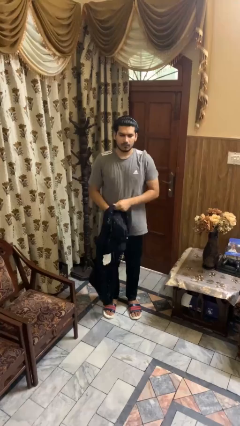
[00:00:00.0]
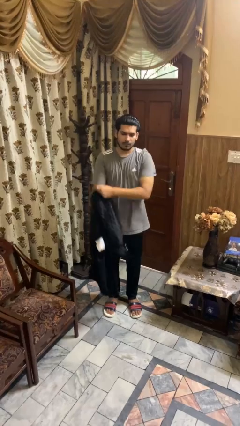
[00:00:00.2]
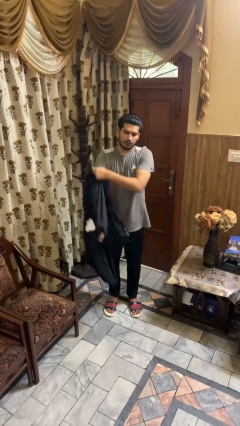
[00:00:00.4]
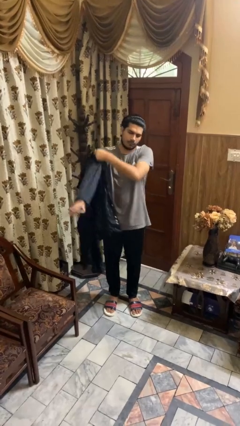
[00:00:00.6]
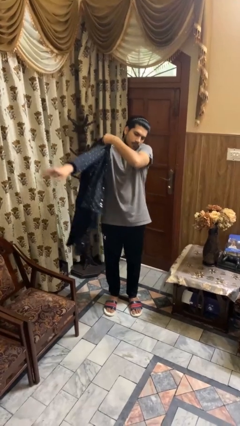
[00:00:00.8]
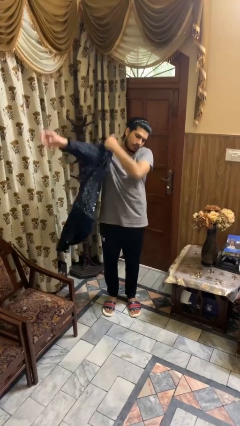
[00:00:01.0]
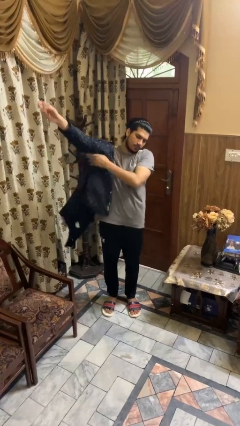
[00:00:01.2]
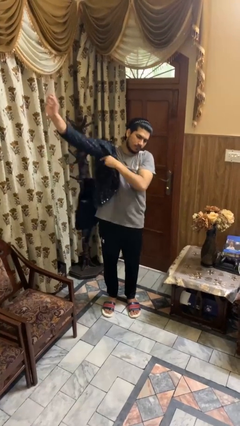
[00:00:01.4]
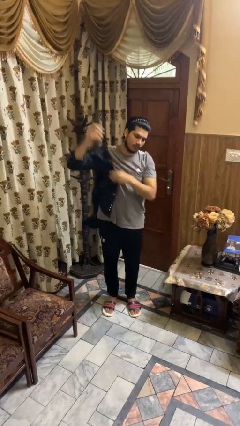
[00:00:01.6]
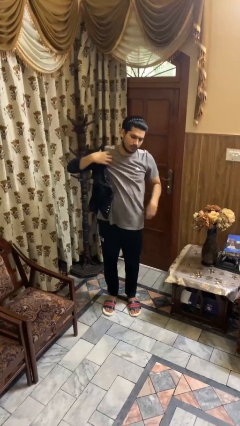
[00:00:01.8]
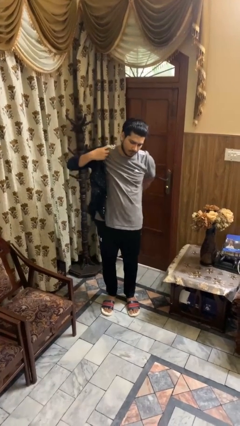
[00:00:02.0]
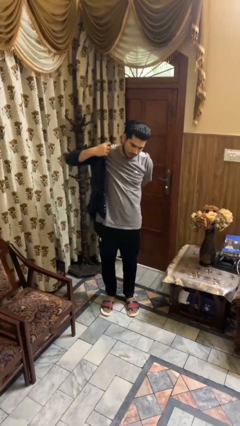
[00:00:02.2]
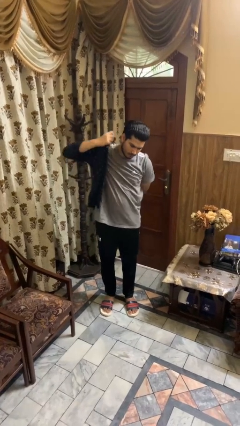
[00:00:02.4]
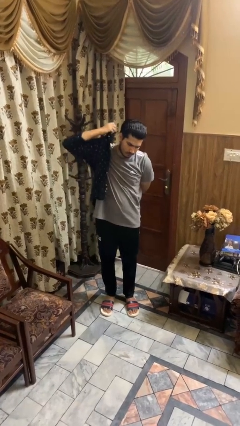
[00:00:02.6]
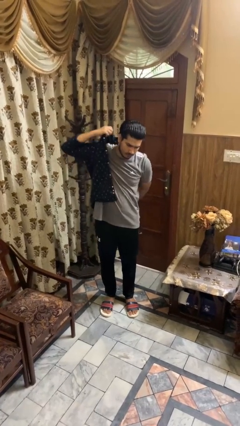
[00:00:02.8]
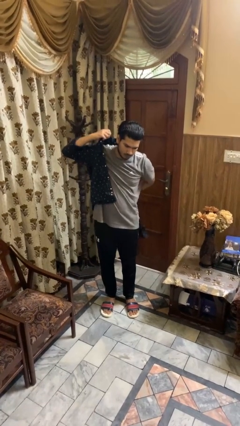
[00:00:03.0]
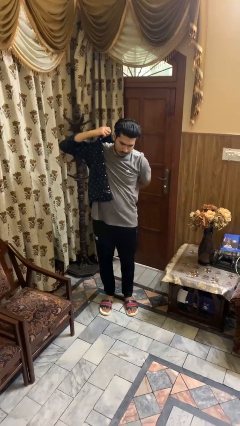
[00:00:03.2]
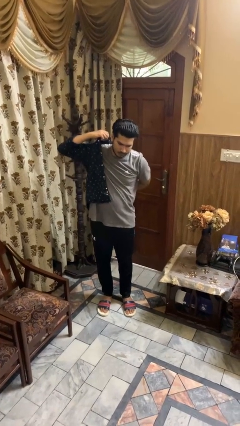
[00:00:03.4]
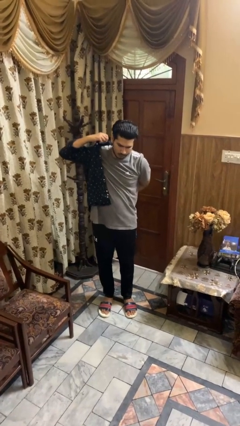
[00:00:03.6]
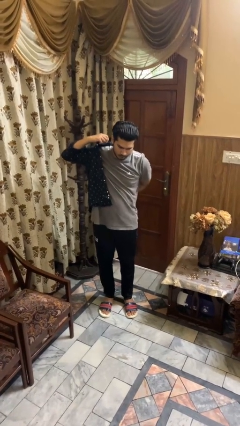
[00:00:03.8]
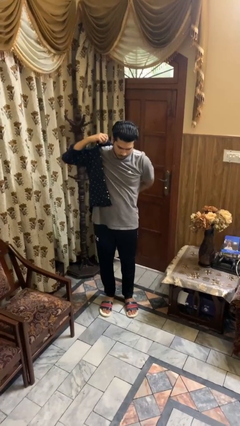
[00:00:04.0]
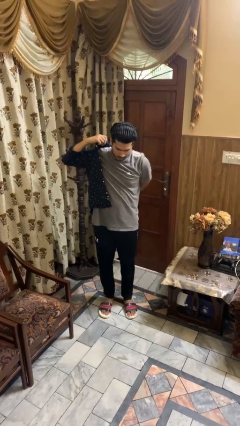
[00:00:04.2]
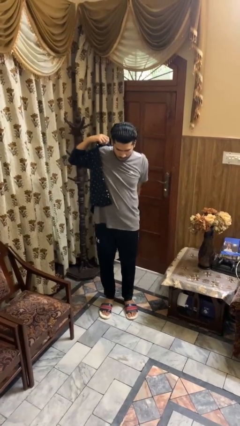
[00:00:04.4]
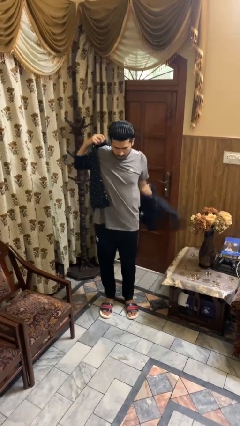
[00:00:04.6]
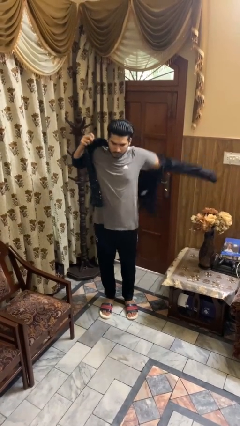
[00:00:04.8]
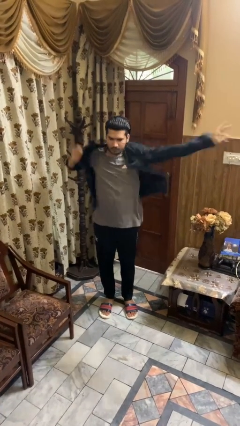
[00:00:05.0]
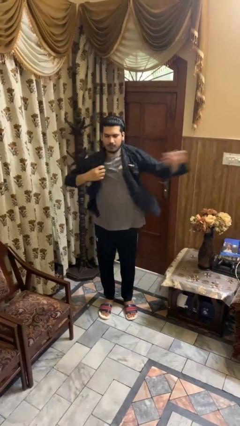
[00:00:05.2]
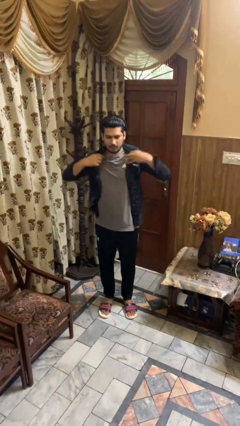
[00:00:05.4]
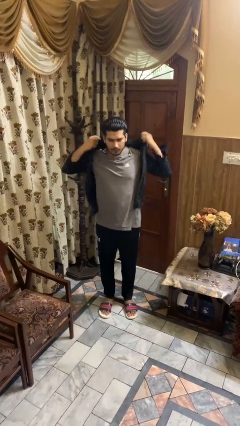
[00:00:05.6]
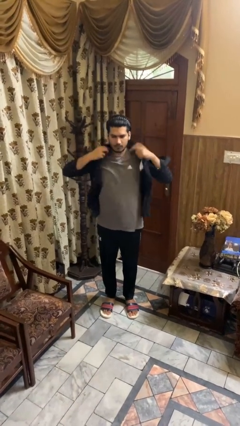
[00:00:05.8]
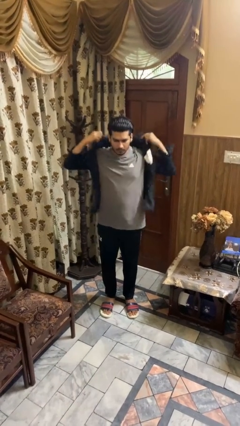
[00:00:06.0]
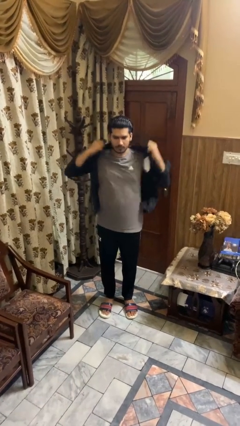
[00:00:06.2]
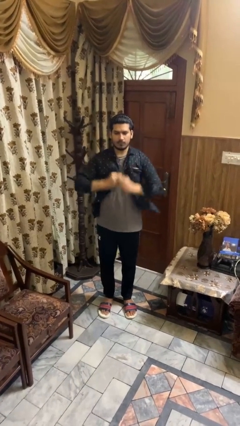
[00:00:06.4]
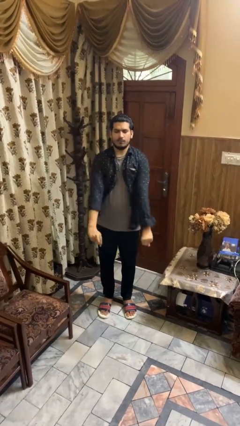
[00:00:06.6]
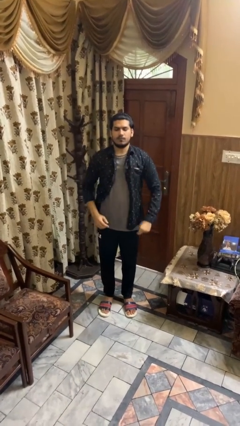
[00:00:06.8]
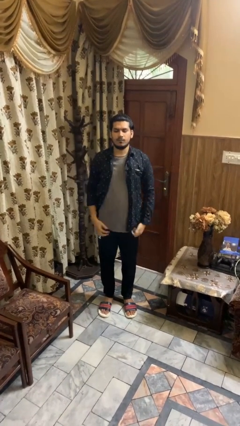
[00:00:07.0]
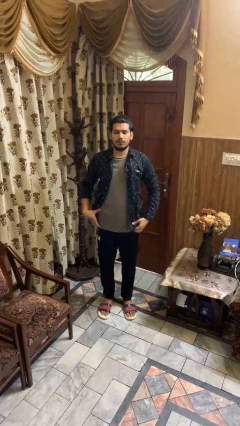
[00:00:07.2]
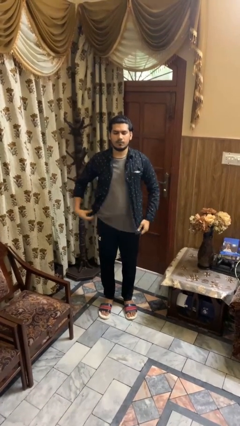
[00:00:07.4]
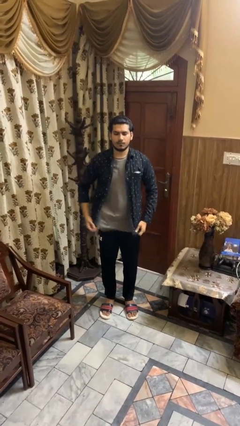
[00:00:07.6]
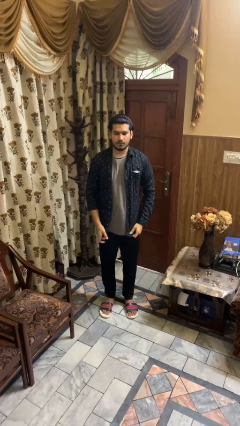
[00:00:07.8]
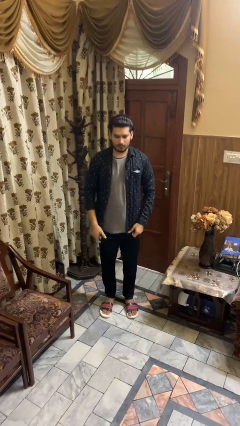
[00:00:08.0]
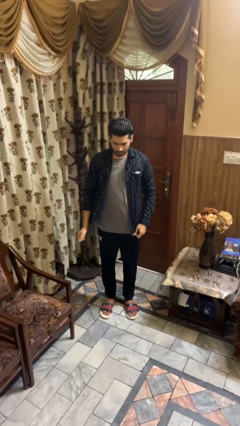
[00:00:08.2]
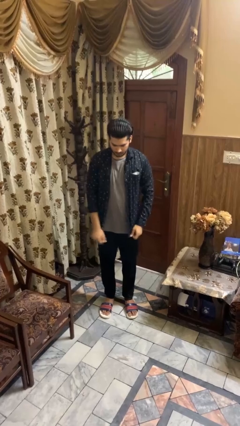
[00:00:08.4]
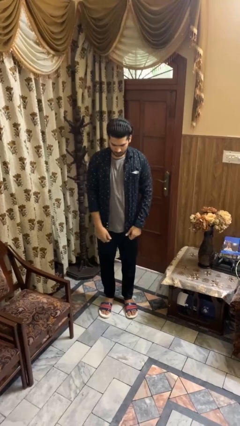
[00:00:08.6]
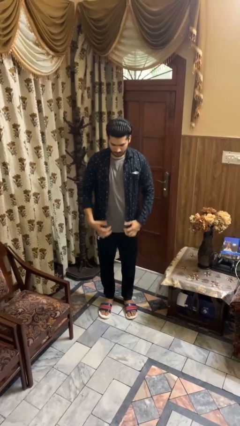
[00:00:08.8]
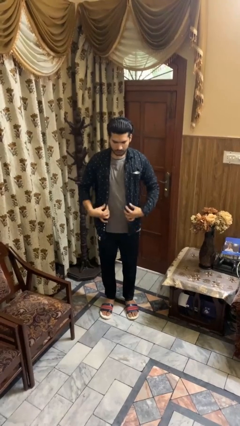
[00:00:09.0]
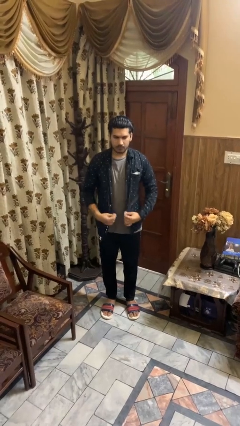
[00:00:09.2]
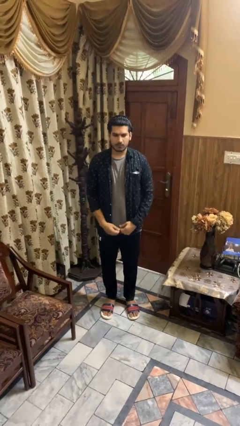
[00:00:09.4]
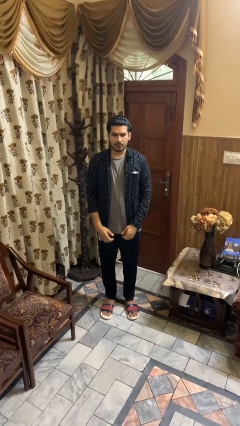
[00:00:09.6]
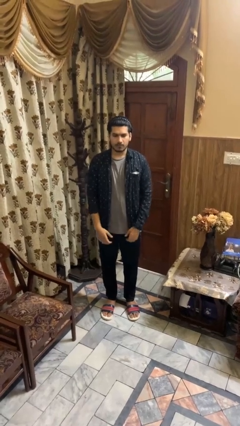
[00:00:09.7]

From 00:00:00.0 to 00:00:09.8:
person puts on shirt

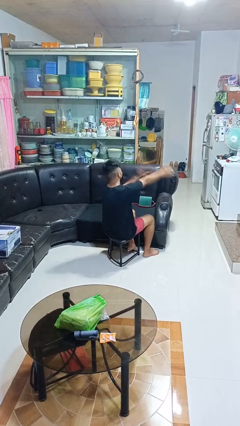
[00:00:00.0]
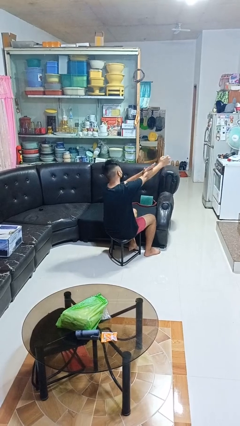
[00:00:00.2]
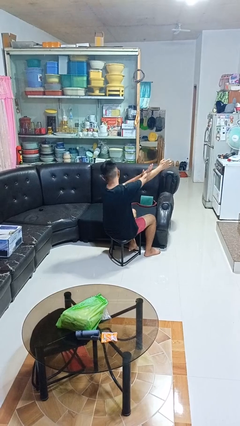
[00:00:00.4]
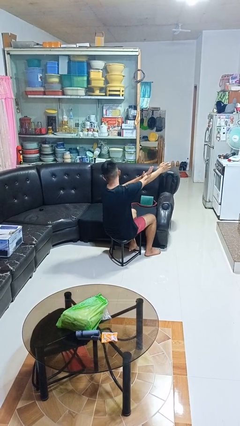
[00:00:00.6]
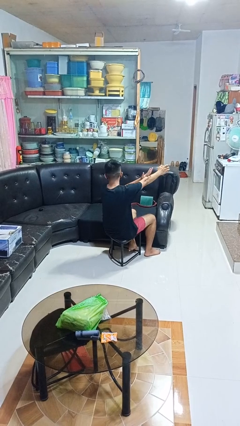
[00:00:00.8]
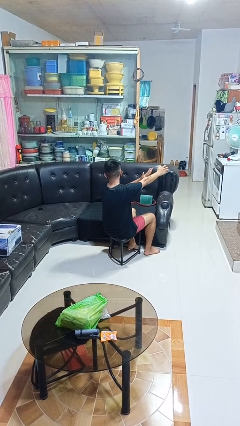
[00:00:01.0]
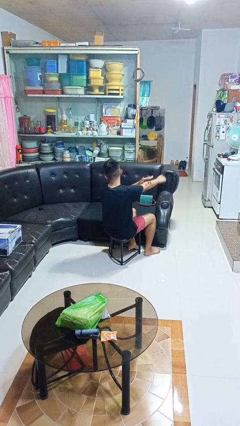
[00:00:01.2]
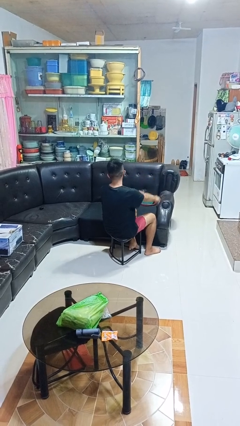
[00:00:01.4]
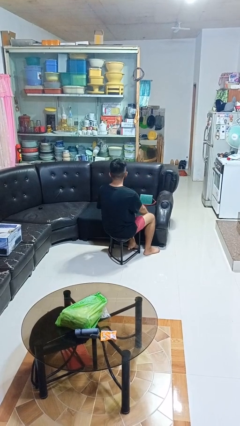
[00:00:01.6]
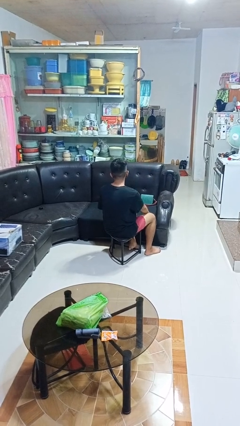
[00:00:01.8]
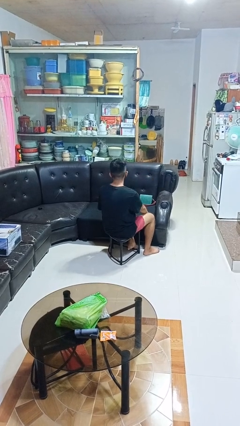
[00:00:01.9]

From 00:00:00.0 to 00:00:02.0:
person swats bug

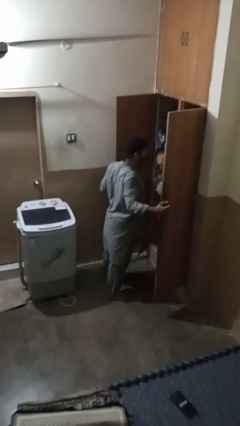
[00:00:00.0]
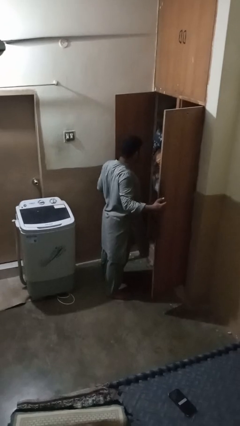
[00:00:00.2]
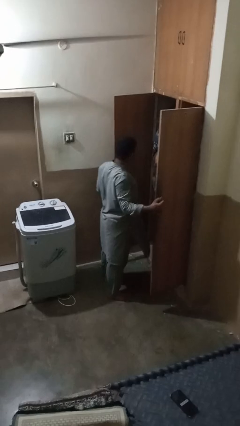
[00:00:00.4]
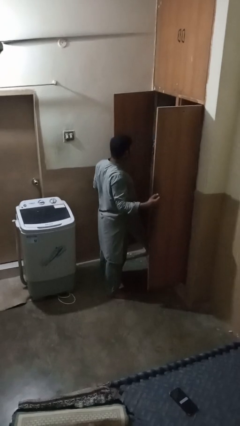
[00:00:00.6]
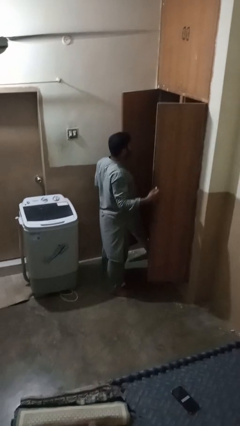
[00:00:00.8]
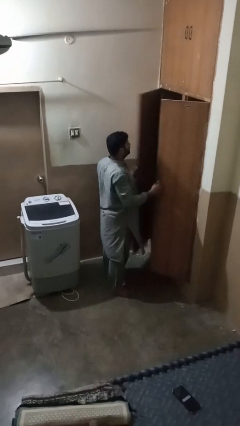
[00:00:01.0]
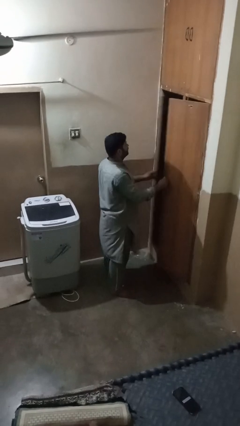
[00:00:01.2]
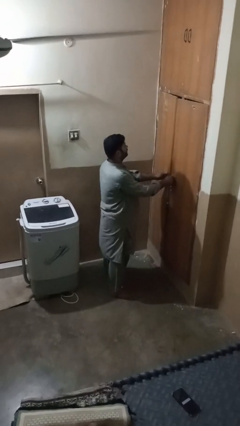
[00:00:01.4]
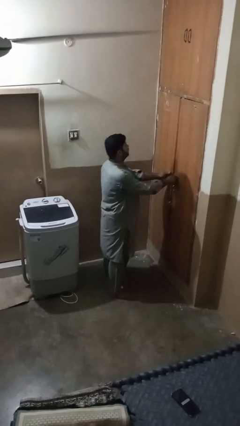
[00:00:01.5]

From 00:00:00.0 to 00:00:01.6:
person closes closet door

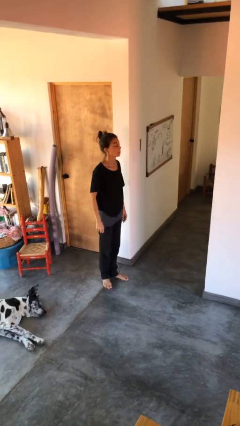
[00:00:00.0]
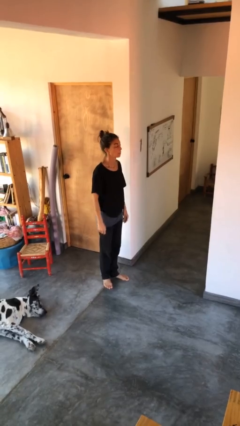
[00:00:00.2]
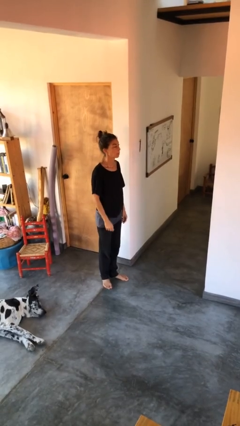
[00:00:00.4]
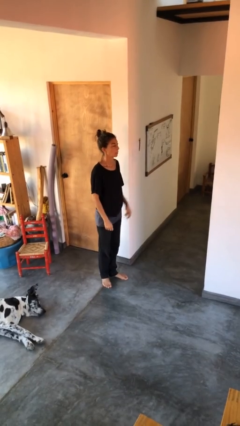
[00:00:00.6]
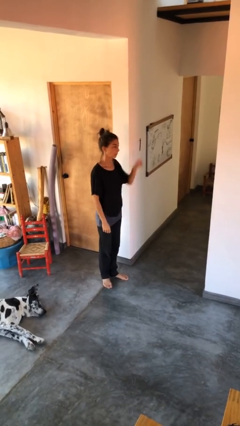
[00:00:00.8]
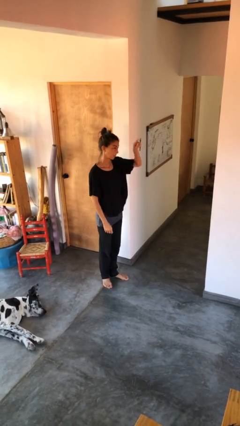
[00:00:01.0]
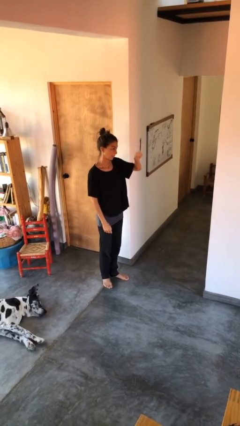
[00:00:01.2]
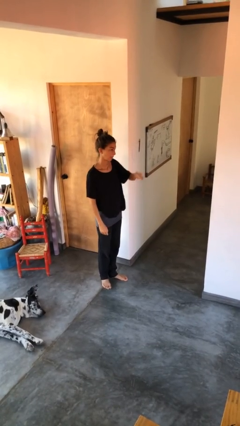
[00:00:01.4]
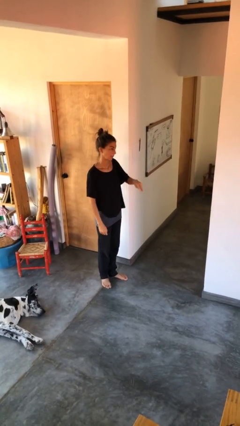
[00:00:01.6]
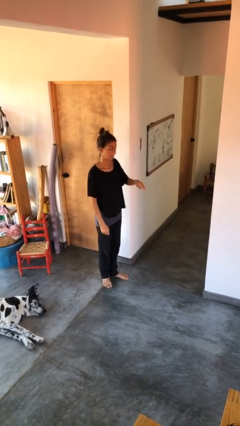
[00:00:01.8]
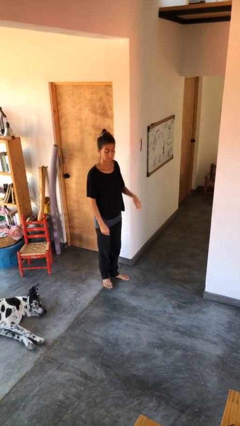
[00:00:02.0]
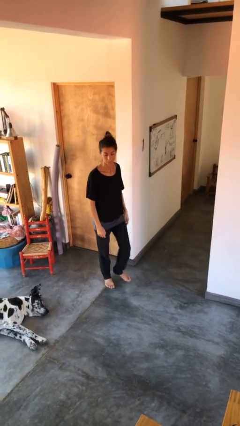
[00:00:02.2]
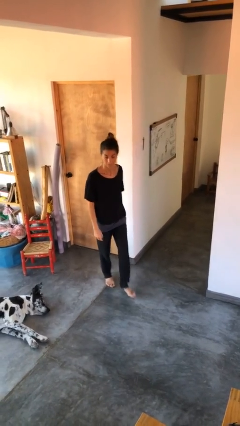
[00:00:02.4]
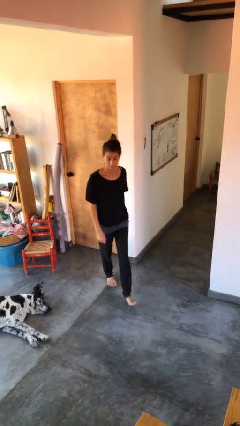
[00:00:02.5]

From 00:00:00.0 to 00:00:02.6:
person gestures swipe down

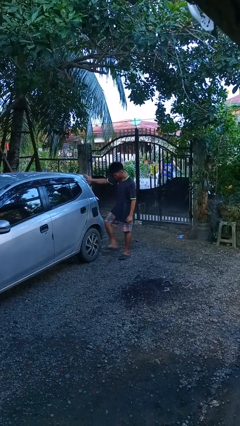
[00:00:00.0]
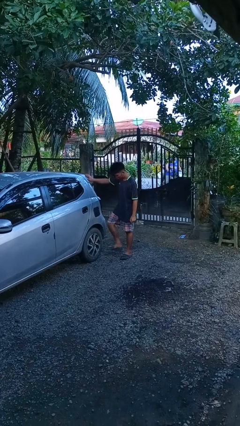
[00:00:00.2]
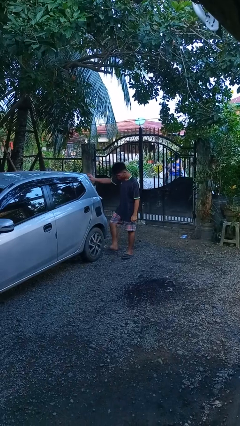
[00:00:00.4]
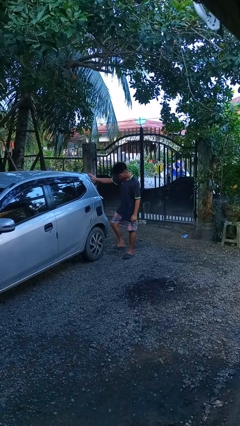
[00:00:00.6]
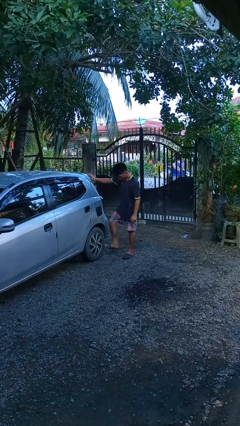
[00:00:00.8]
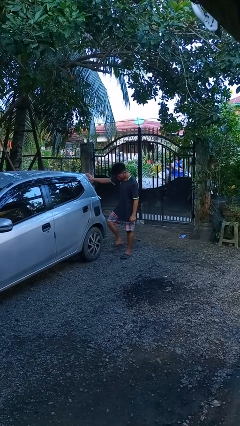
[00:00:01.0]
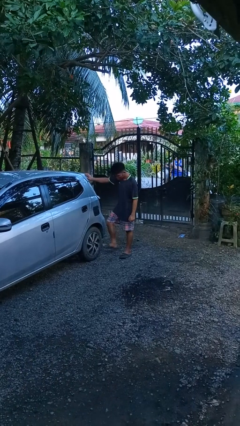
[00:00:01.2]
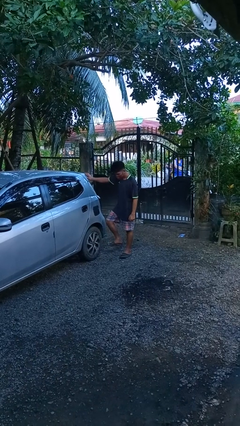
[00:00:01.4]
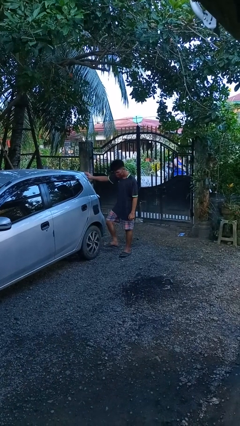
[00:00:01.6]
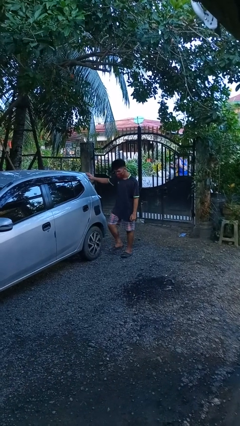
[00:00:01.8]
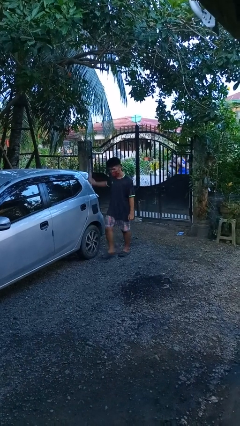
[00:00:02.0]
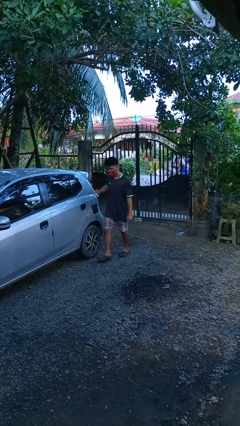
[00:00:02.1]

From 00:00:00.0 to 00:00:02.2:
person kicks car tires
